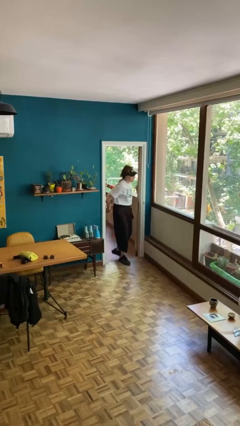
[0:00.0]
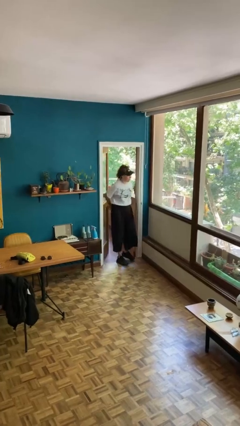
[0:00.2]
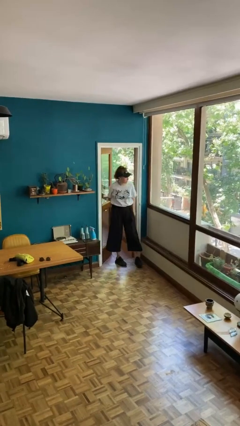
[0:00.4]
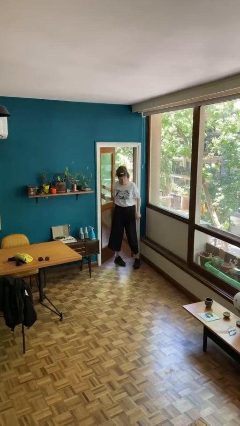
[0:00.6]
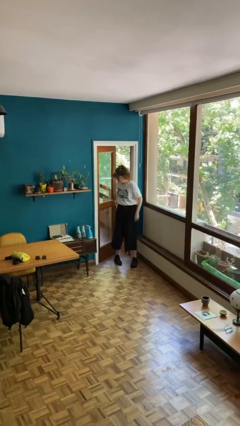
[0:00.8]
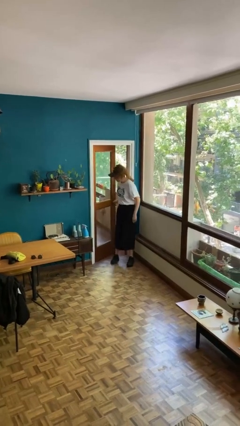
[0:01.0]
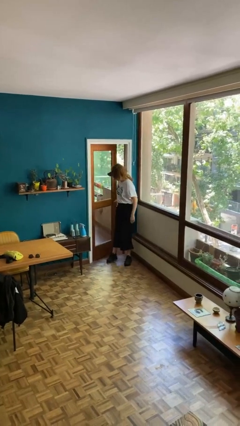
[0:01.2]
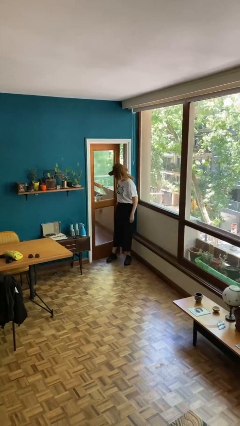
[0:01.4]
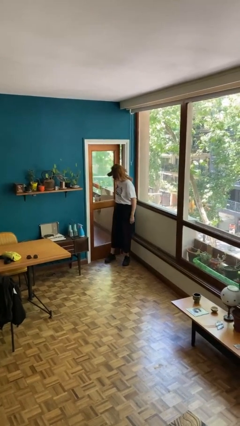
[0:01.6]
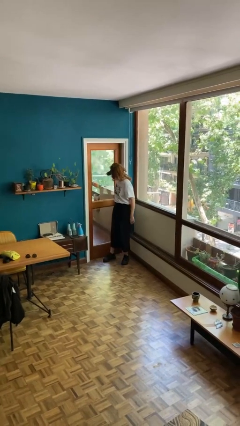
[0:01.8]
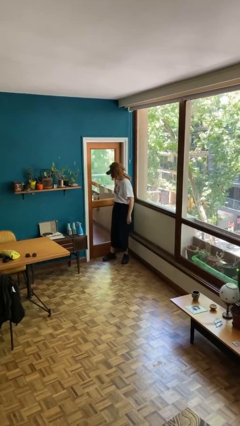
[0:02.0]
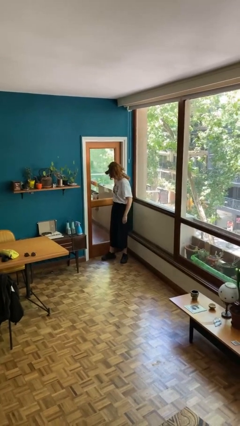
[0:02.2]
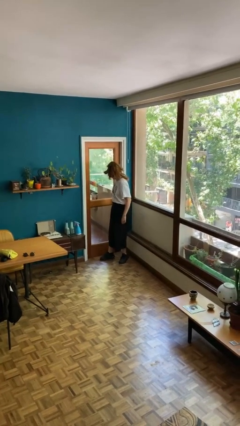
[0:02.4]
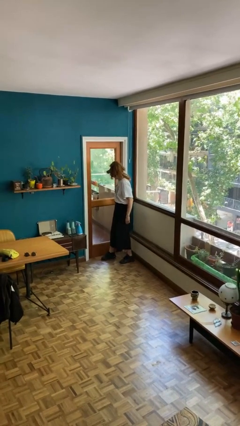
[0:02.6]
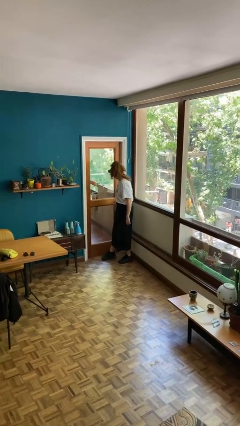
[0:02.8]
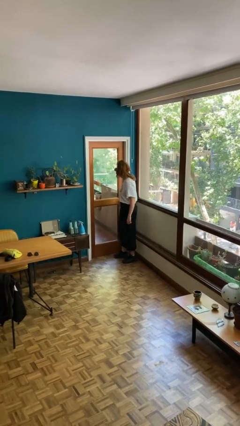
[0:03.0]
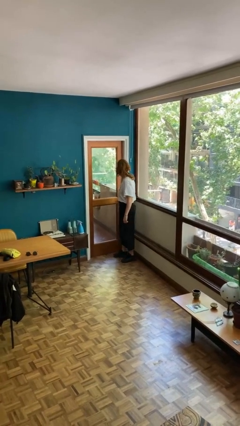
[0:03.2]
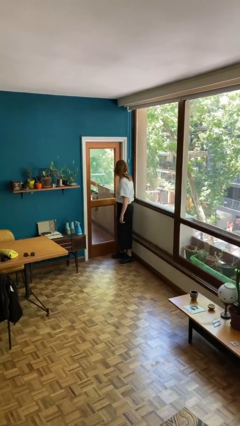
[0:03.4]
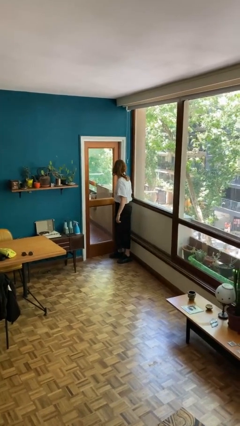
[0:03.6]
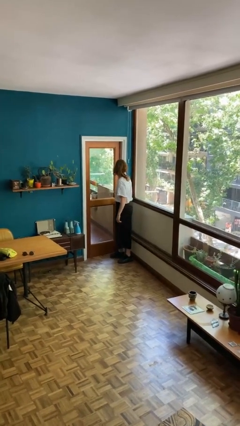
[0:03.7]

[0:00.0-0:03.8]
person closes facility door

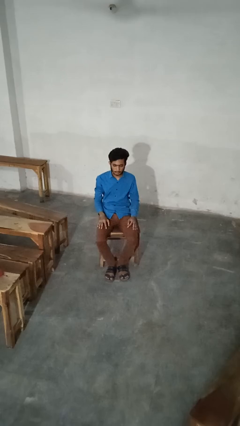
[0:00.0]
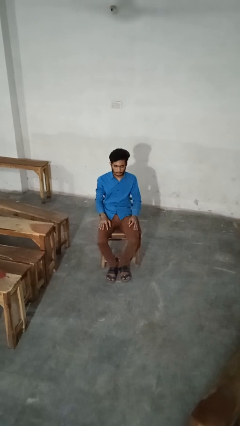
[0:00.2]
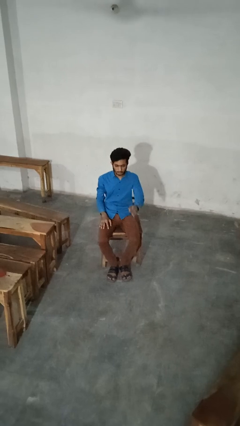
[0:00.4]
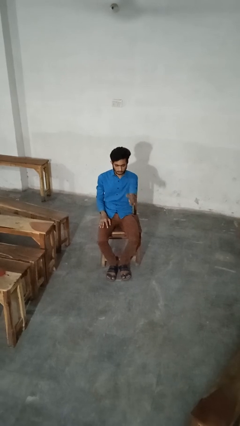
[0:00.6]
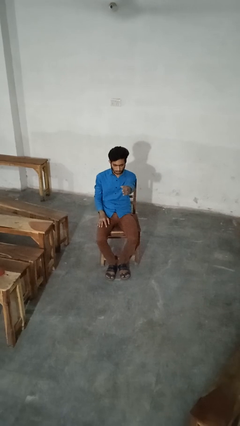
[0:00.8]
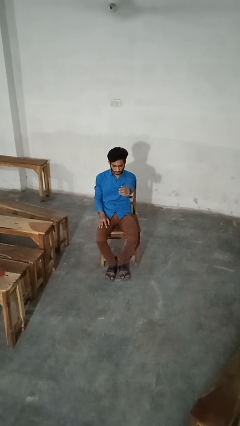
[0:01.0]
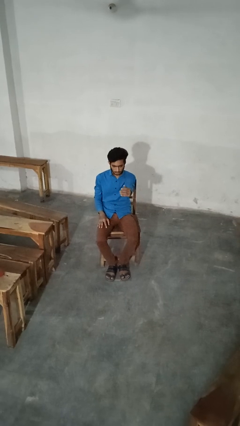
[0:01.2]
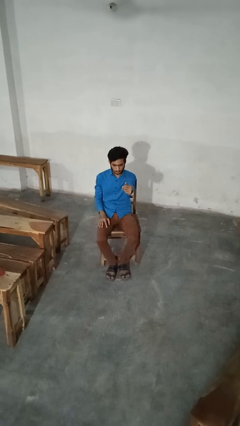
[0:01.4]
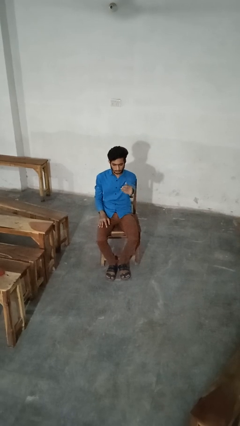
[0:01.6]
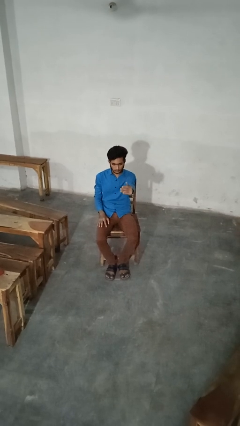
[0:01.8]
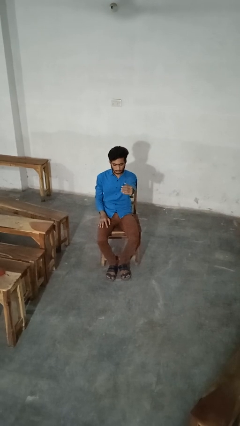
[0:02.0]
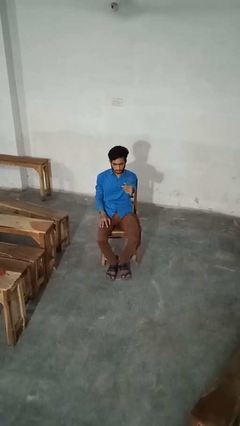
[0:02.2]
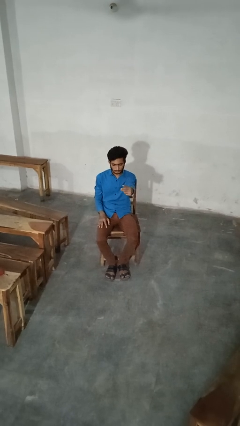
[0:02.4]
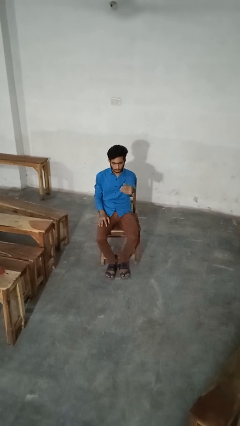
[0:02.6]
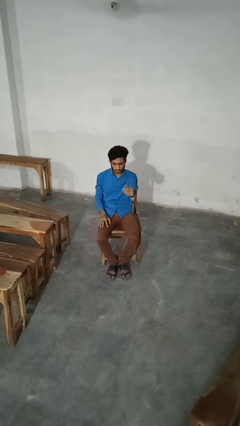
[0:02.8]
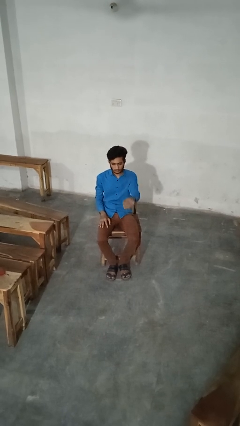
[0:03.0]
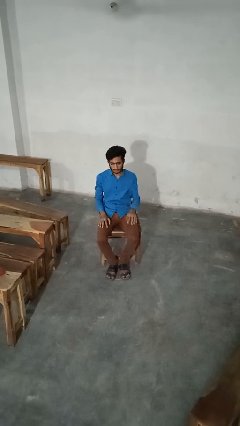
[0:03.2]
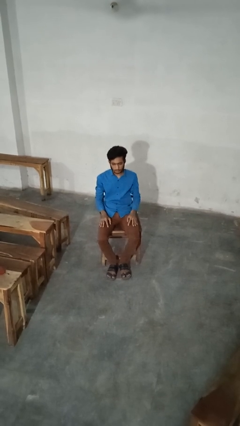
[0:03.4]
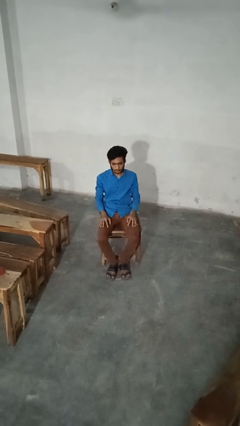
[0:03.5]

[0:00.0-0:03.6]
person gestures come here

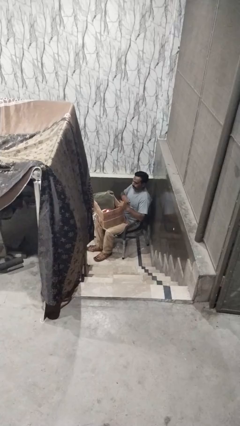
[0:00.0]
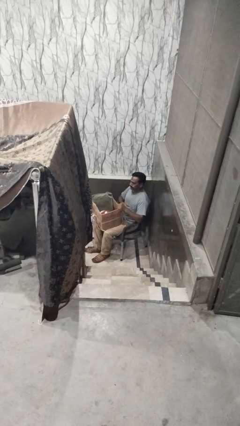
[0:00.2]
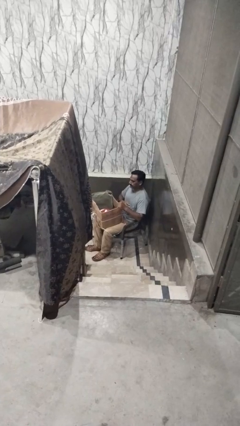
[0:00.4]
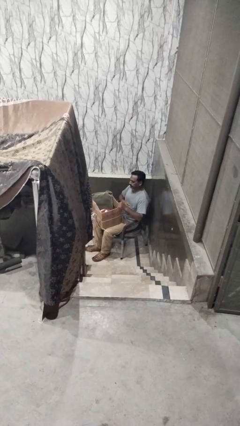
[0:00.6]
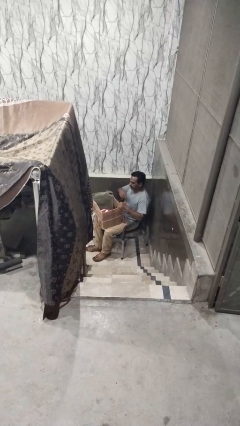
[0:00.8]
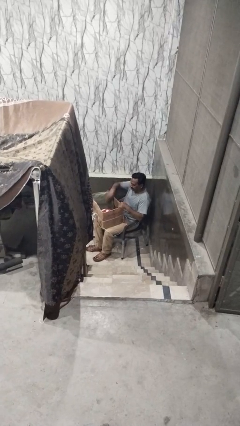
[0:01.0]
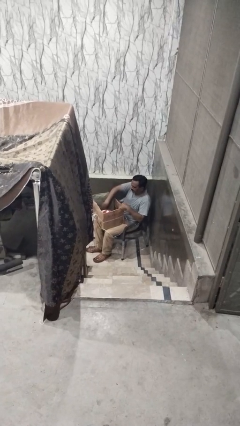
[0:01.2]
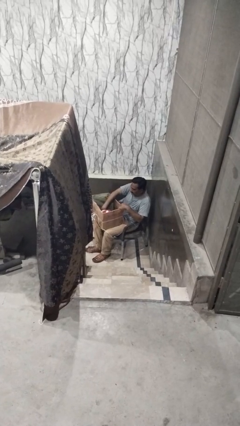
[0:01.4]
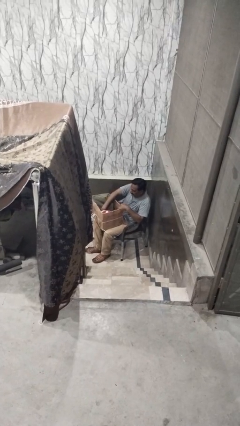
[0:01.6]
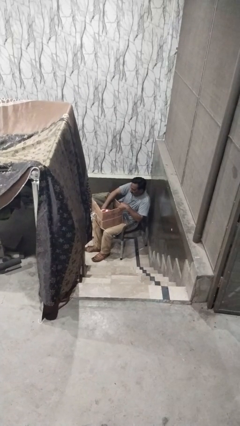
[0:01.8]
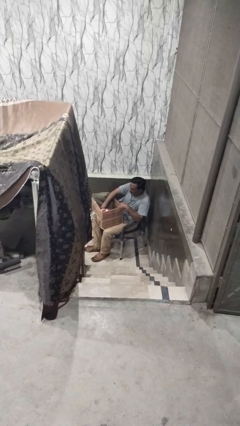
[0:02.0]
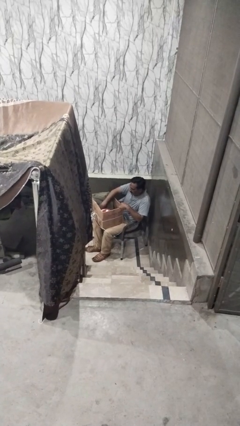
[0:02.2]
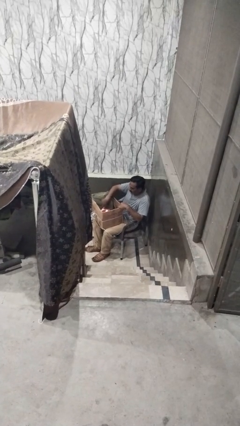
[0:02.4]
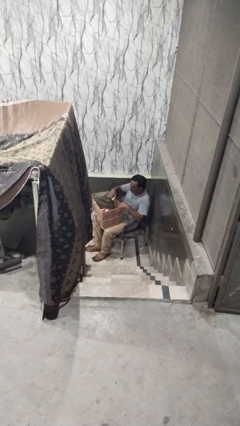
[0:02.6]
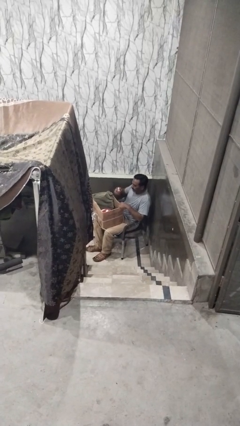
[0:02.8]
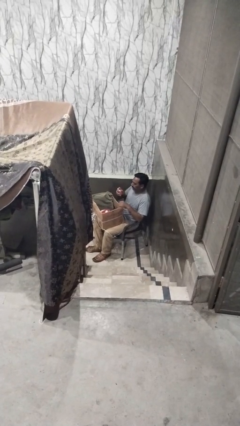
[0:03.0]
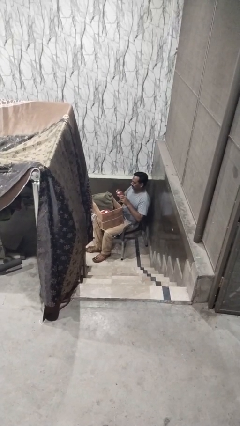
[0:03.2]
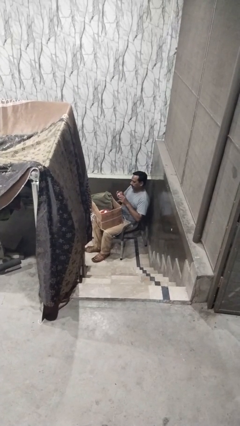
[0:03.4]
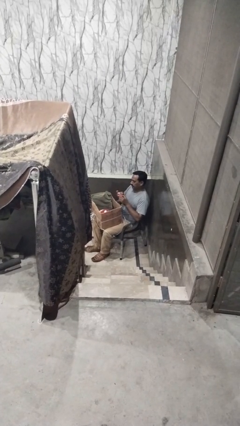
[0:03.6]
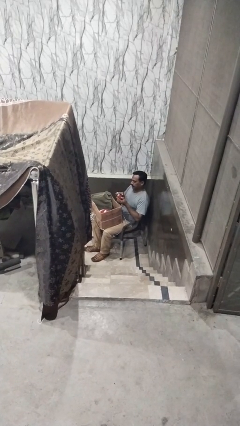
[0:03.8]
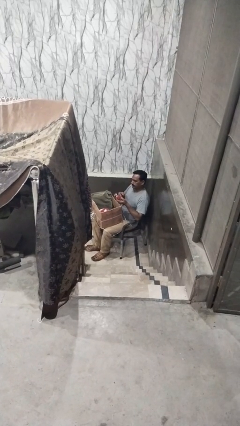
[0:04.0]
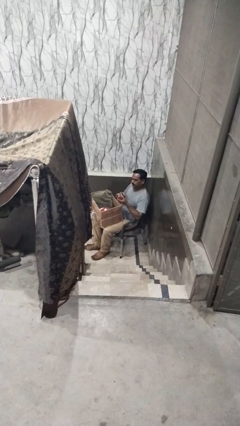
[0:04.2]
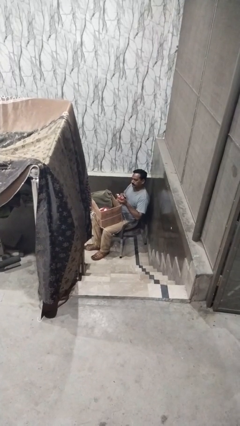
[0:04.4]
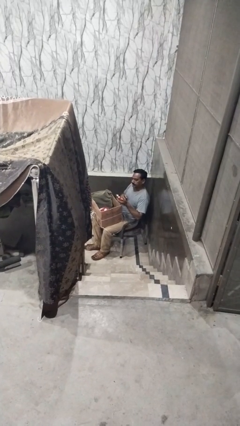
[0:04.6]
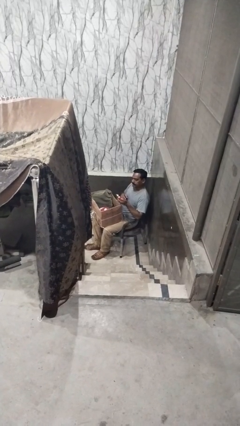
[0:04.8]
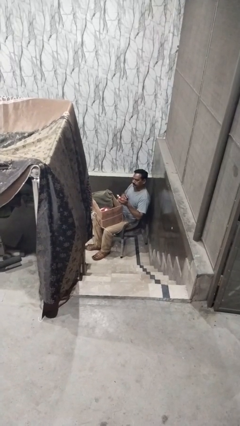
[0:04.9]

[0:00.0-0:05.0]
person takes object from box

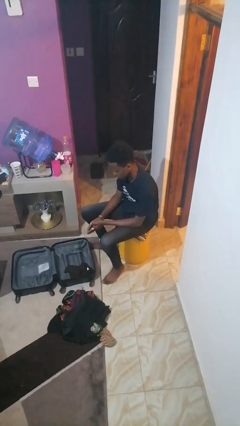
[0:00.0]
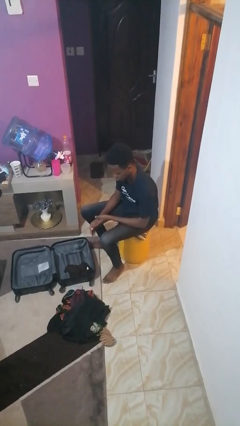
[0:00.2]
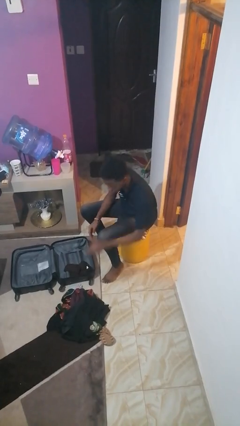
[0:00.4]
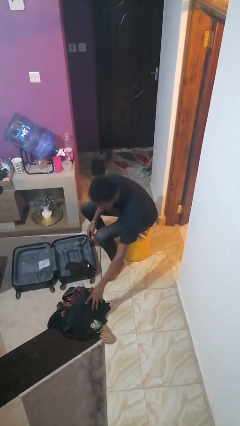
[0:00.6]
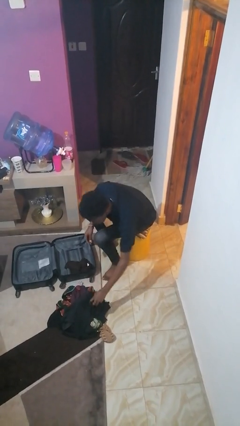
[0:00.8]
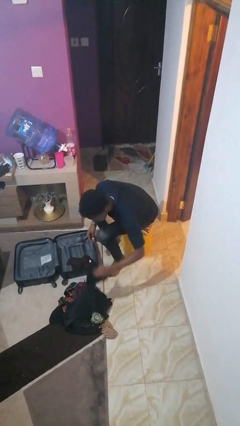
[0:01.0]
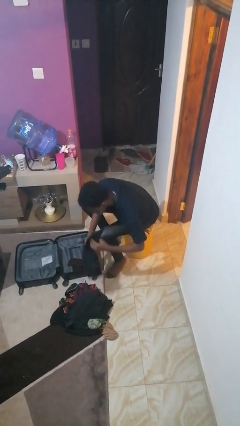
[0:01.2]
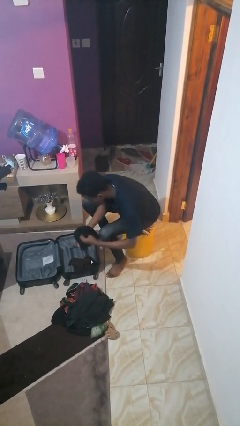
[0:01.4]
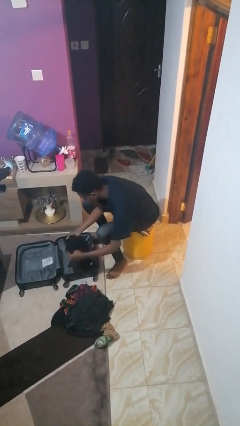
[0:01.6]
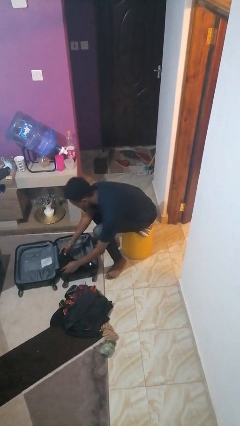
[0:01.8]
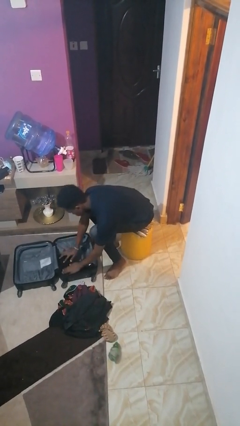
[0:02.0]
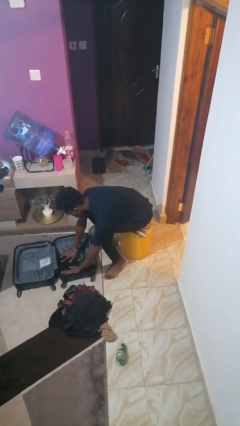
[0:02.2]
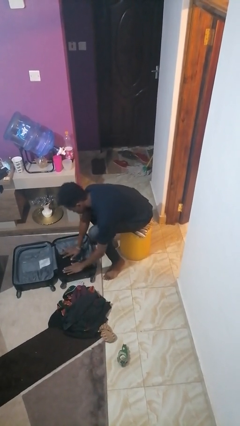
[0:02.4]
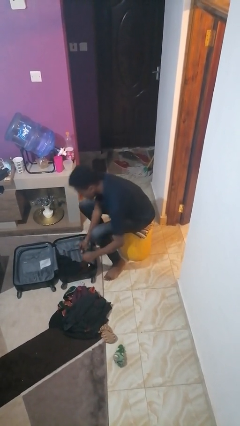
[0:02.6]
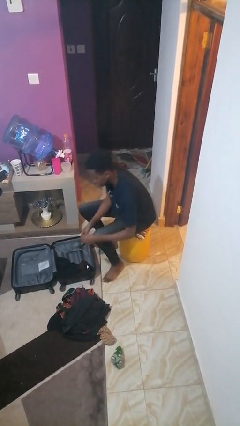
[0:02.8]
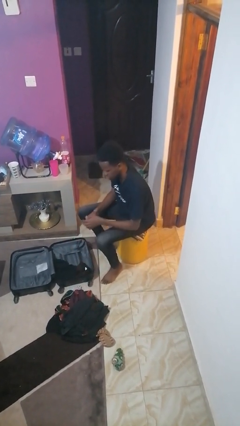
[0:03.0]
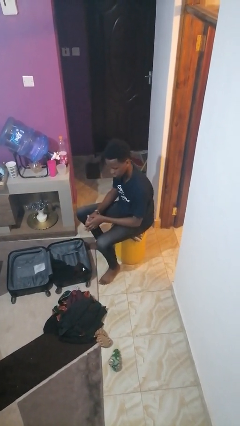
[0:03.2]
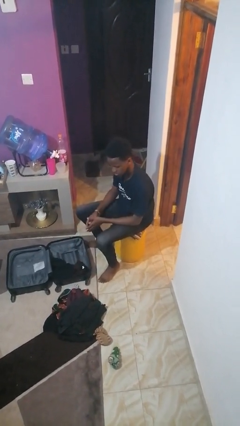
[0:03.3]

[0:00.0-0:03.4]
person loads clothes into suitcase

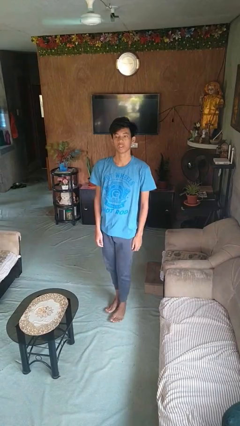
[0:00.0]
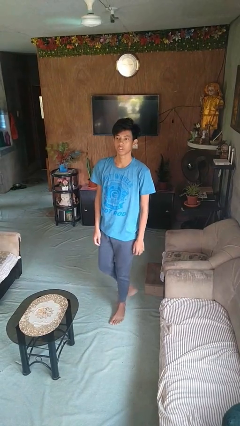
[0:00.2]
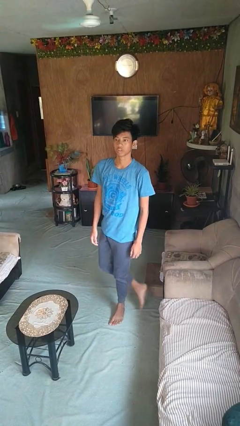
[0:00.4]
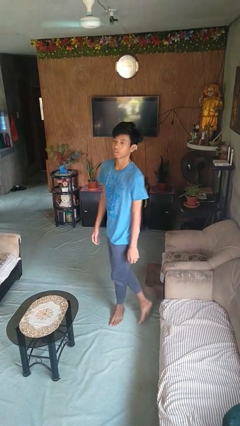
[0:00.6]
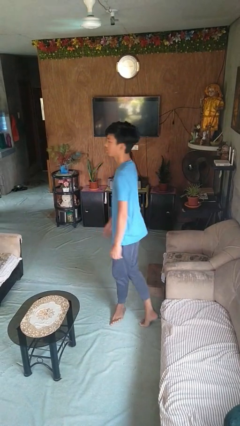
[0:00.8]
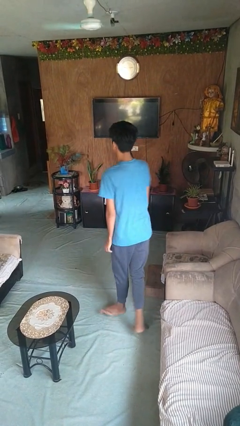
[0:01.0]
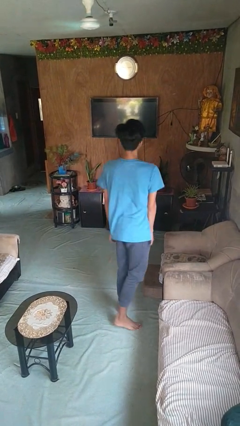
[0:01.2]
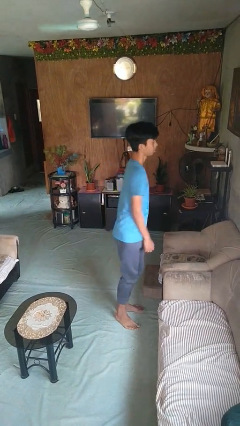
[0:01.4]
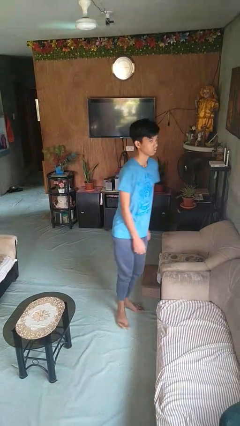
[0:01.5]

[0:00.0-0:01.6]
person twirls

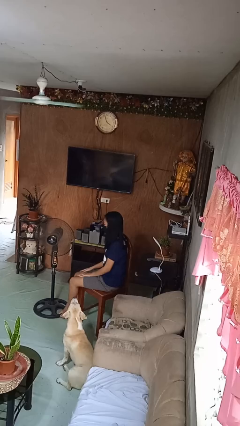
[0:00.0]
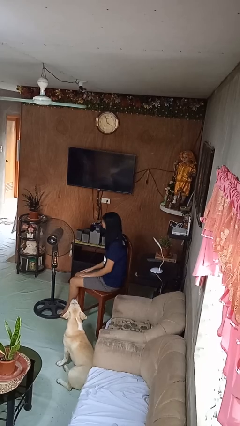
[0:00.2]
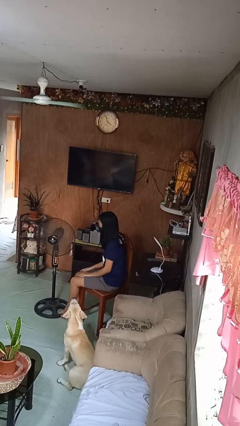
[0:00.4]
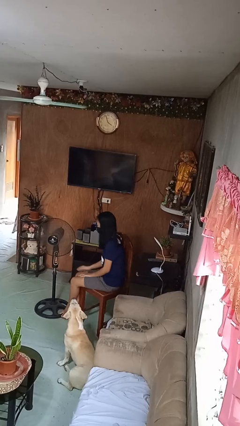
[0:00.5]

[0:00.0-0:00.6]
person turns off fan
